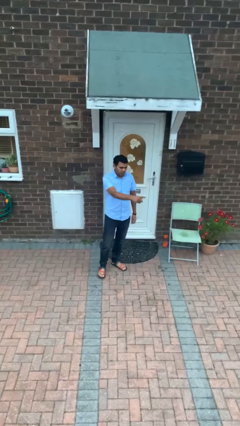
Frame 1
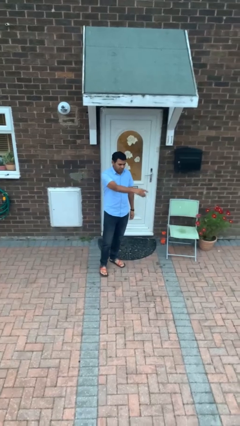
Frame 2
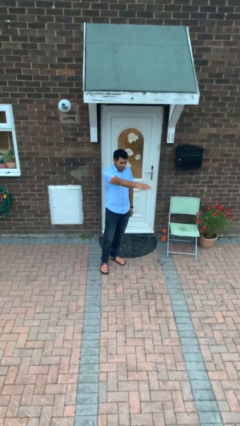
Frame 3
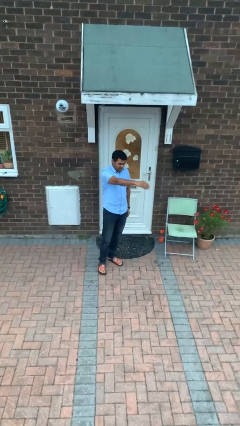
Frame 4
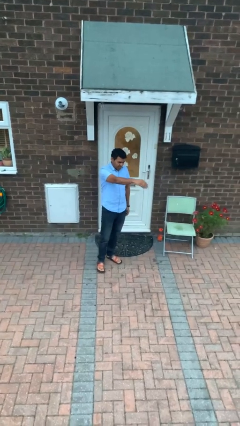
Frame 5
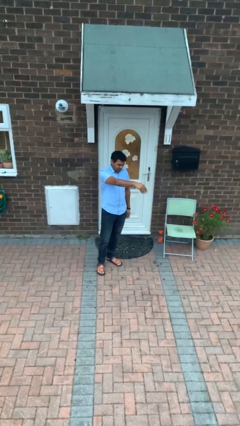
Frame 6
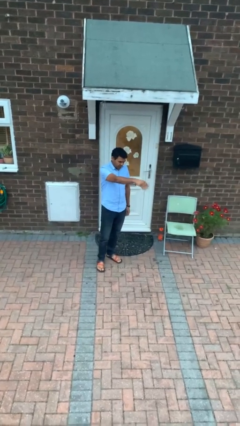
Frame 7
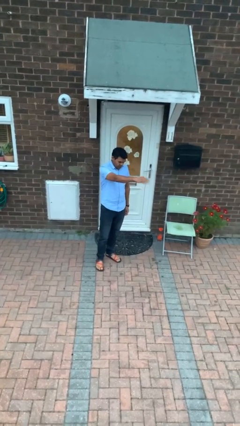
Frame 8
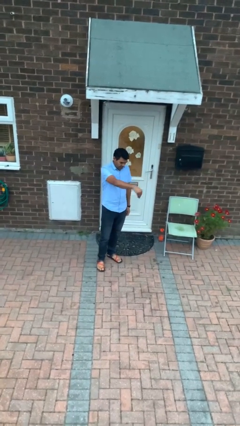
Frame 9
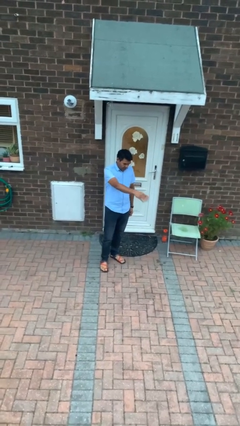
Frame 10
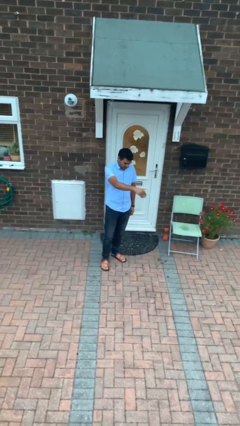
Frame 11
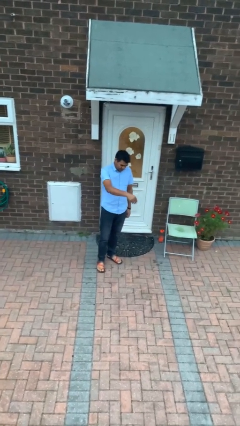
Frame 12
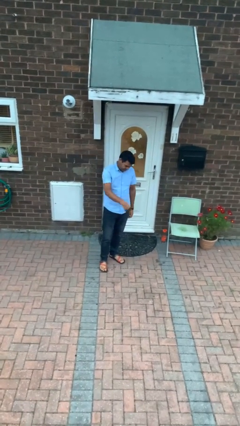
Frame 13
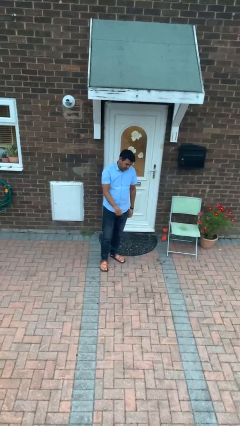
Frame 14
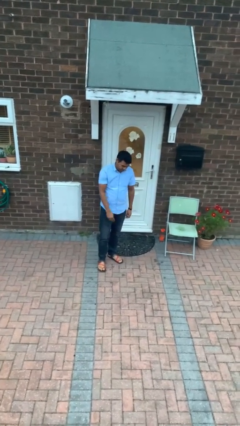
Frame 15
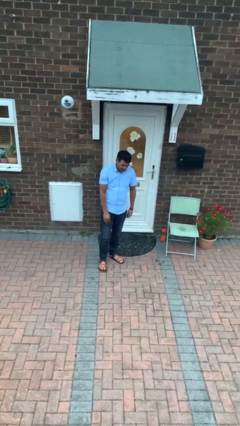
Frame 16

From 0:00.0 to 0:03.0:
person gestures come here

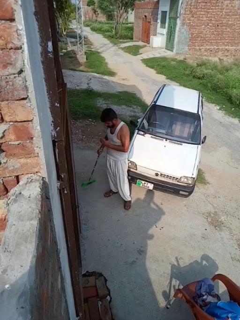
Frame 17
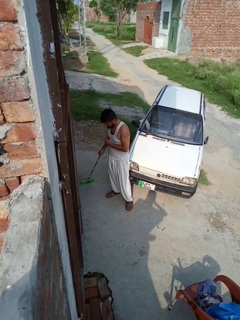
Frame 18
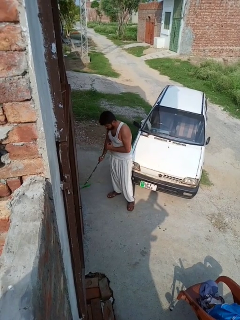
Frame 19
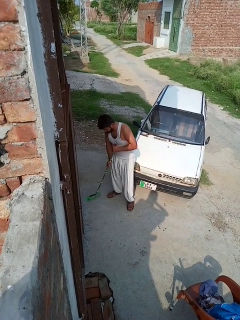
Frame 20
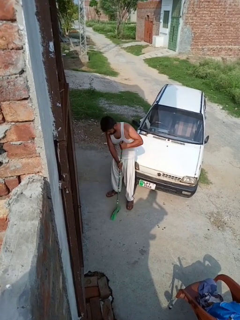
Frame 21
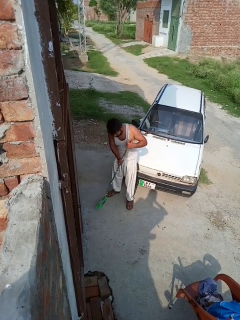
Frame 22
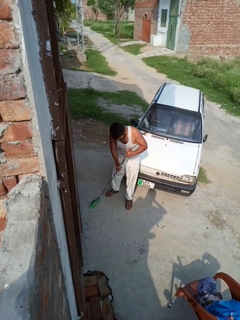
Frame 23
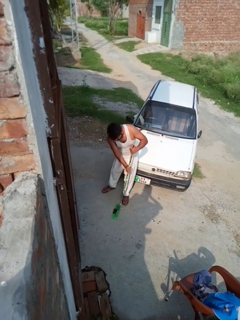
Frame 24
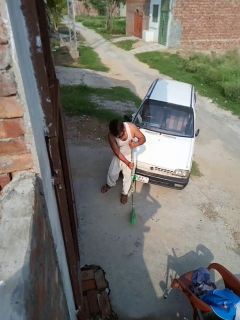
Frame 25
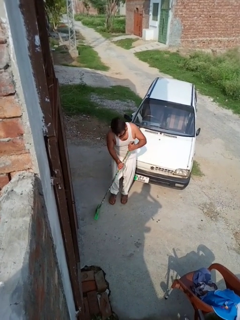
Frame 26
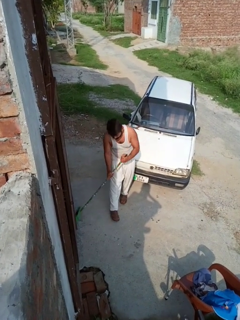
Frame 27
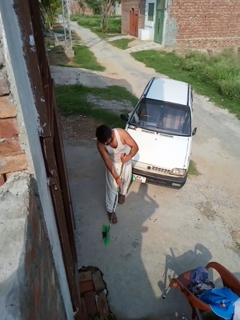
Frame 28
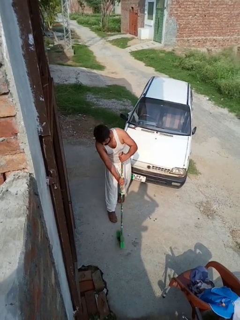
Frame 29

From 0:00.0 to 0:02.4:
person sweeps floor

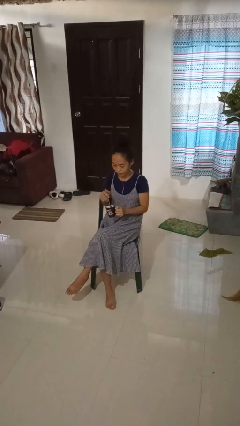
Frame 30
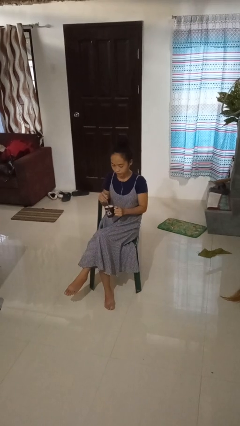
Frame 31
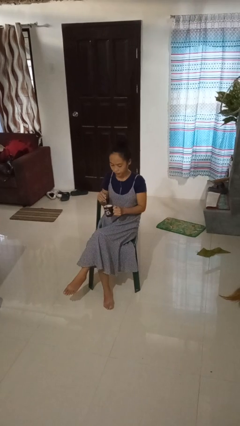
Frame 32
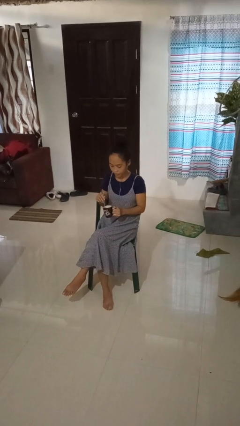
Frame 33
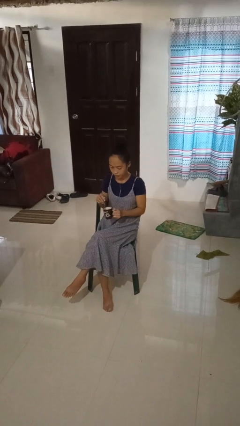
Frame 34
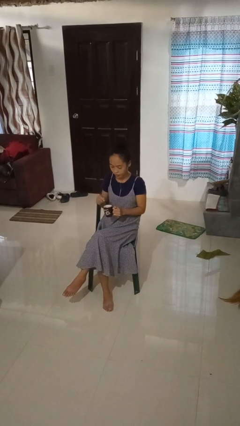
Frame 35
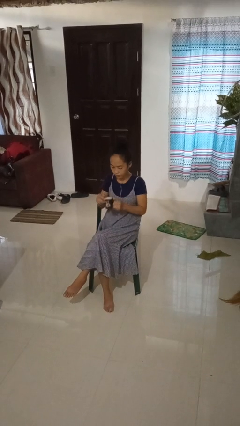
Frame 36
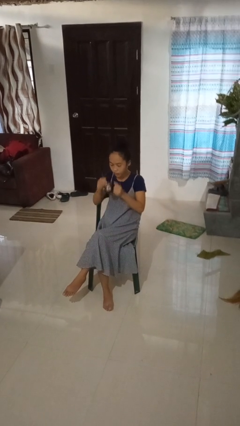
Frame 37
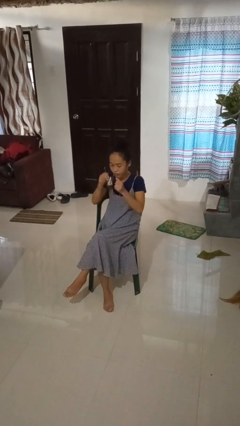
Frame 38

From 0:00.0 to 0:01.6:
person stirs mug

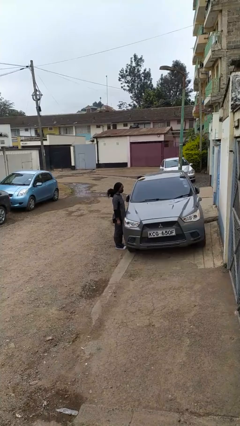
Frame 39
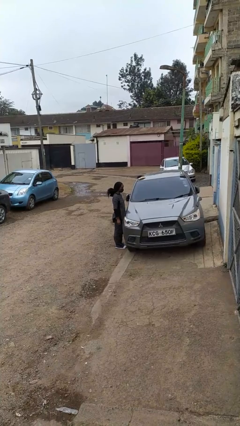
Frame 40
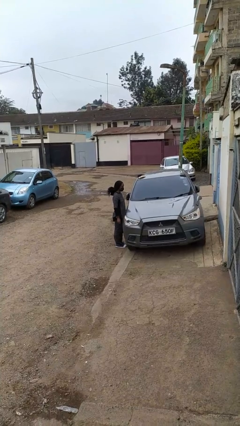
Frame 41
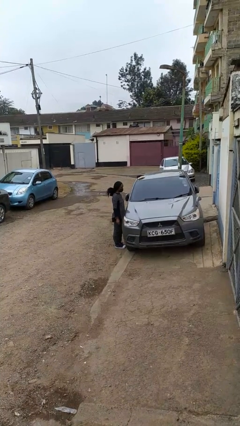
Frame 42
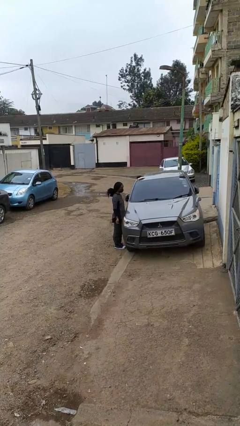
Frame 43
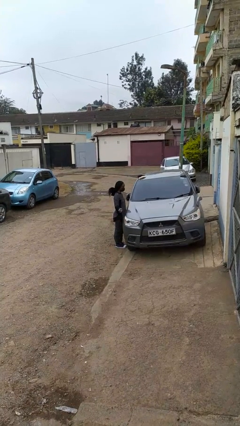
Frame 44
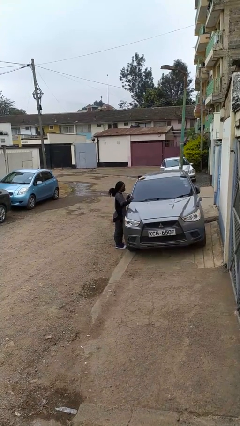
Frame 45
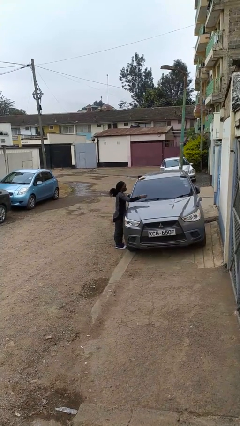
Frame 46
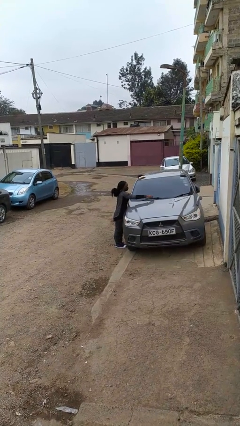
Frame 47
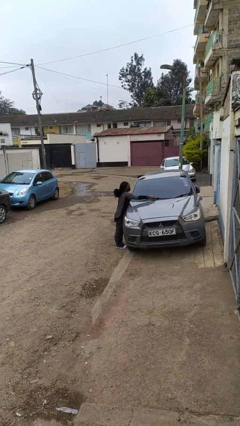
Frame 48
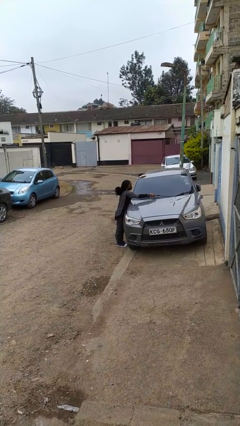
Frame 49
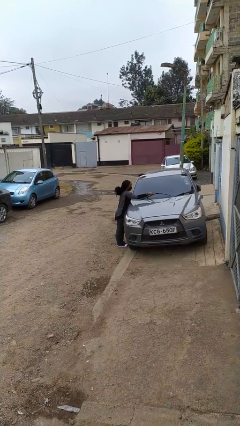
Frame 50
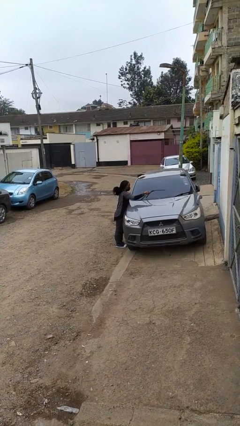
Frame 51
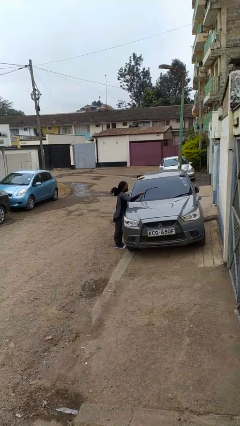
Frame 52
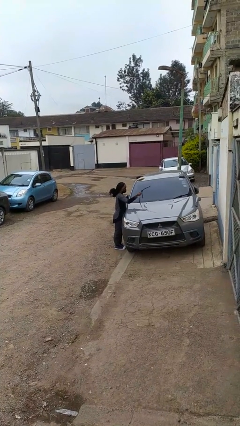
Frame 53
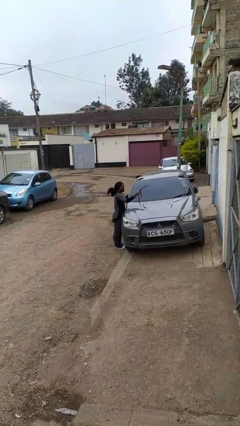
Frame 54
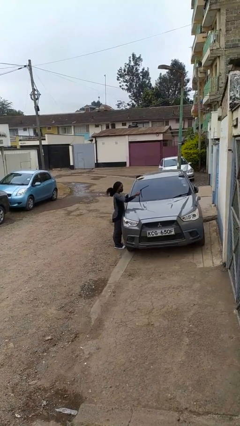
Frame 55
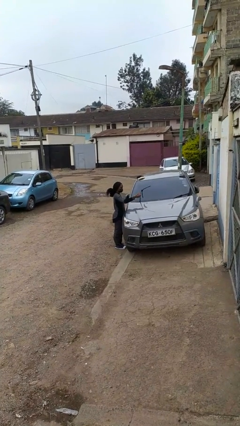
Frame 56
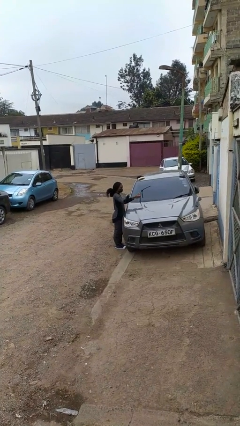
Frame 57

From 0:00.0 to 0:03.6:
person picks up object from couch

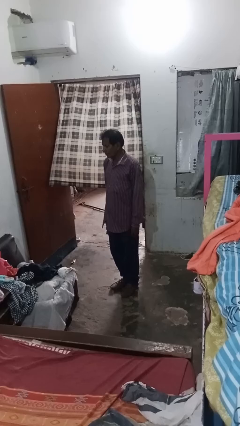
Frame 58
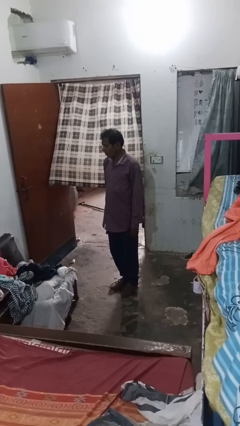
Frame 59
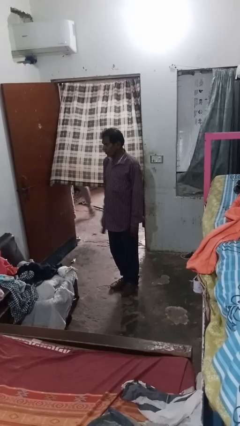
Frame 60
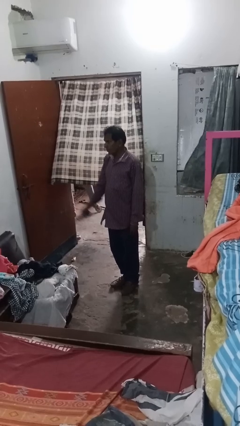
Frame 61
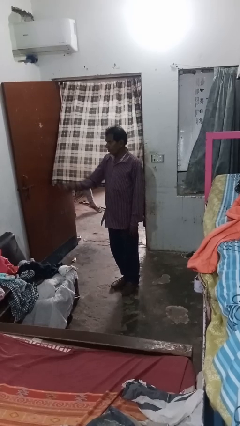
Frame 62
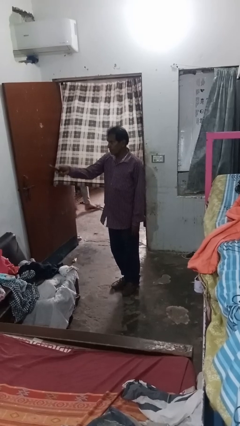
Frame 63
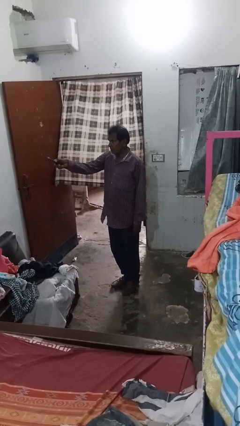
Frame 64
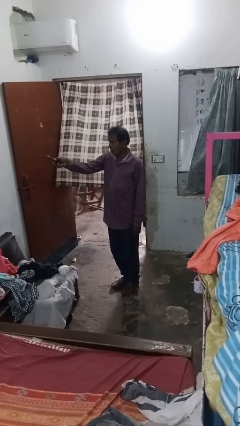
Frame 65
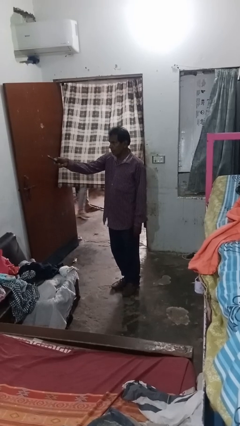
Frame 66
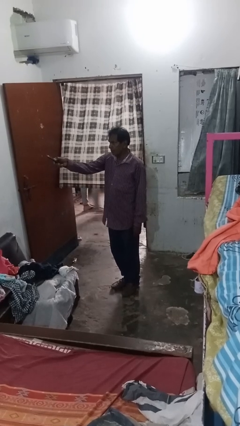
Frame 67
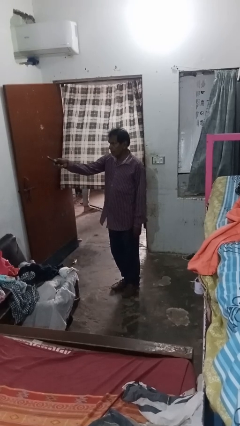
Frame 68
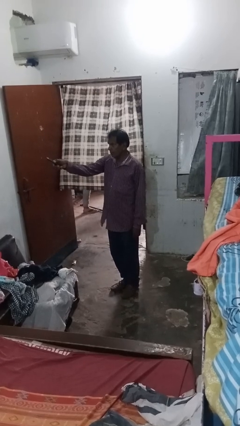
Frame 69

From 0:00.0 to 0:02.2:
person uses television remote

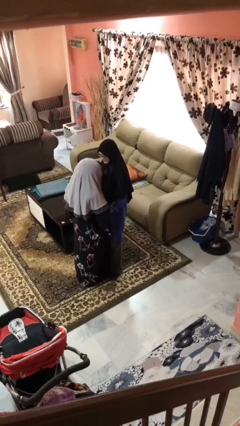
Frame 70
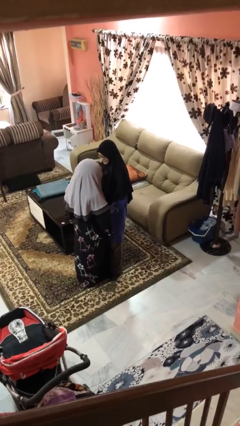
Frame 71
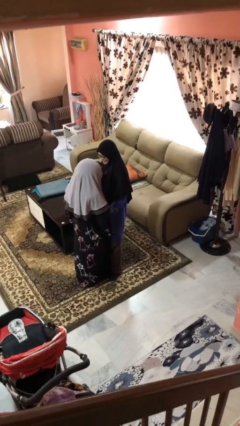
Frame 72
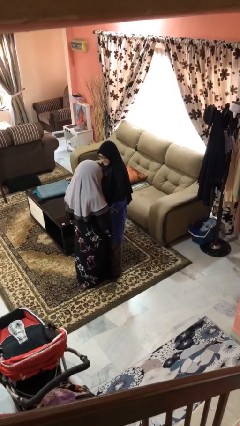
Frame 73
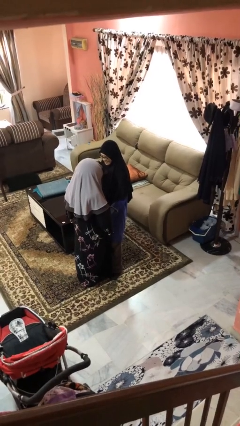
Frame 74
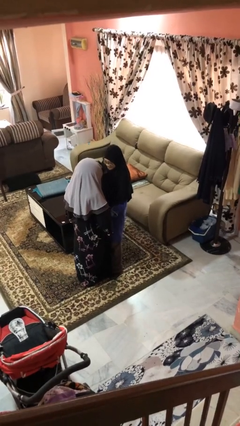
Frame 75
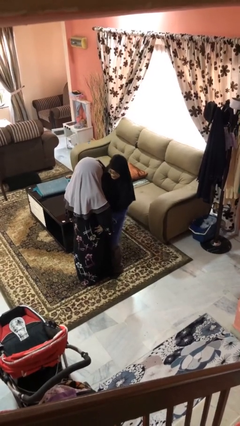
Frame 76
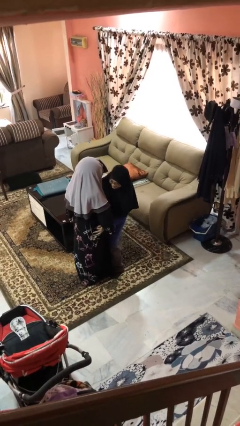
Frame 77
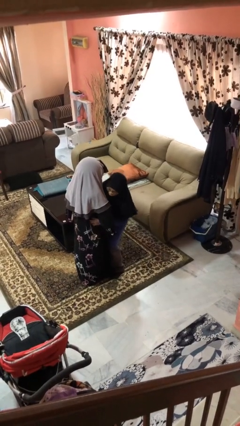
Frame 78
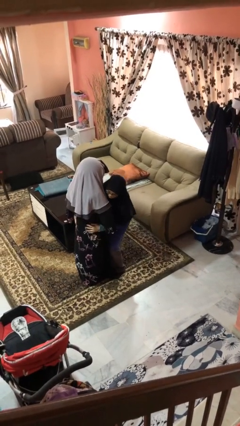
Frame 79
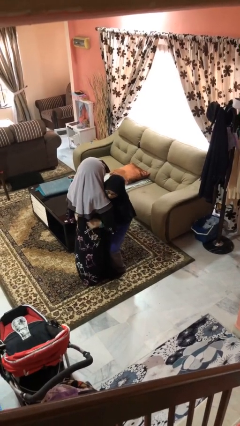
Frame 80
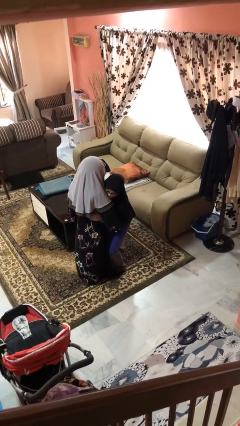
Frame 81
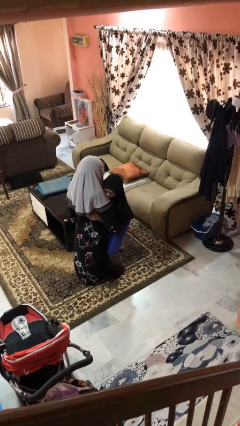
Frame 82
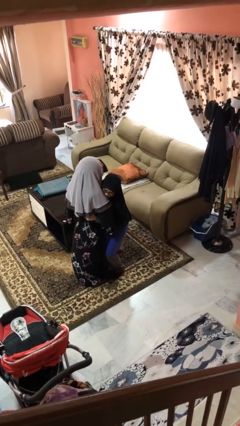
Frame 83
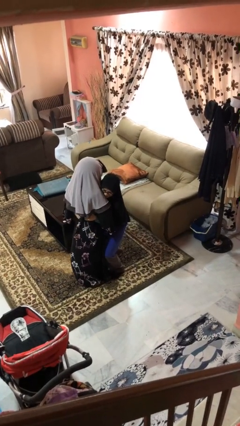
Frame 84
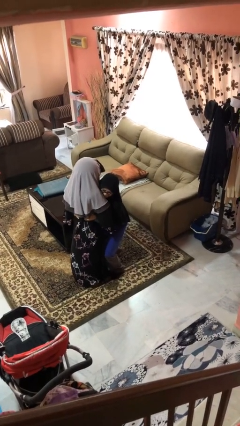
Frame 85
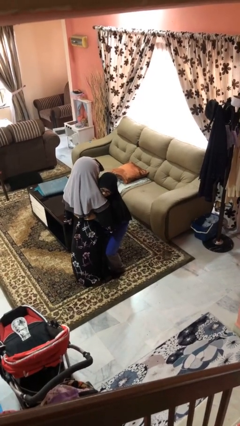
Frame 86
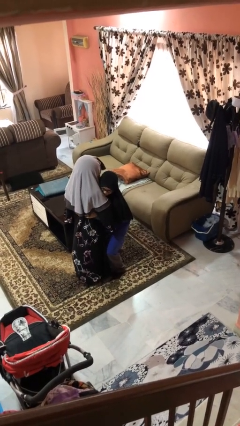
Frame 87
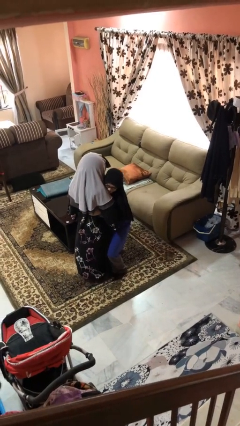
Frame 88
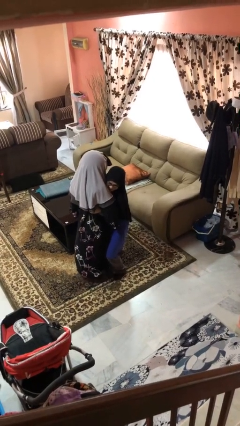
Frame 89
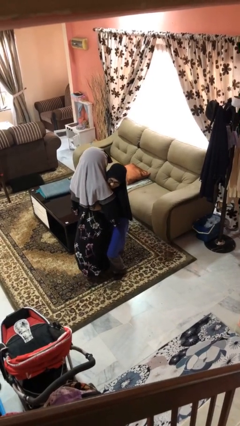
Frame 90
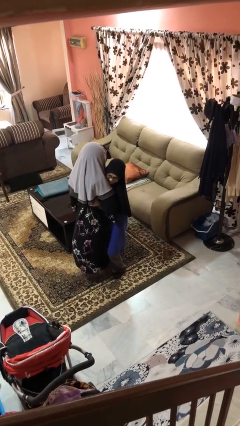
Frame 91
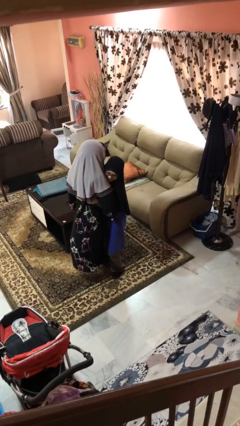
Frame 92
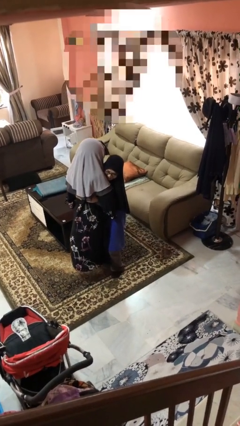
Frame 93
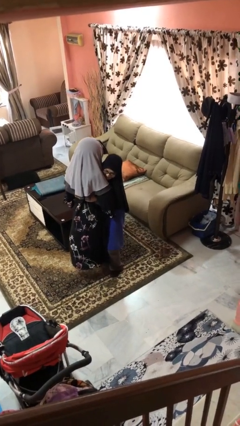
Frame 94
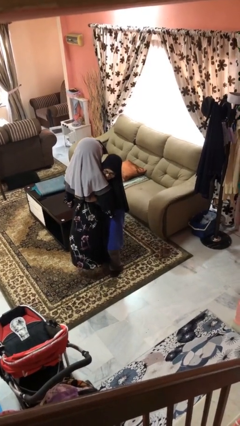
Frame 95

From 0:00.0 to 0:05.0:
person picks up person

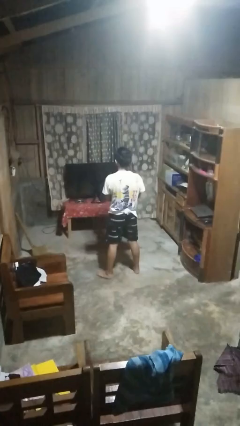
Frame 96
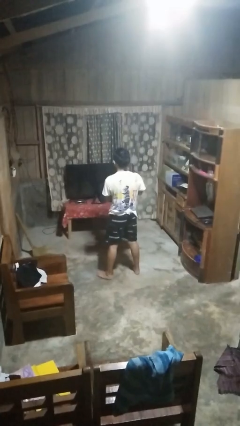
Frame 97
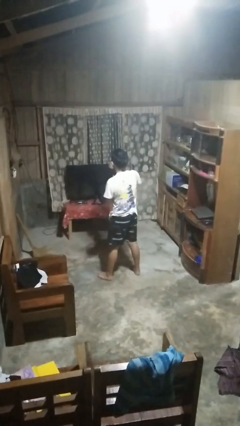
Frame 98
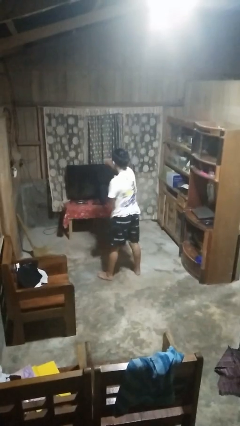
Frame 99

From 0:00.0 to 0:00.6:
person punches
